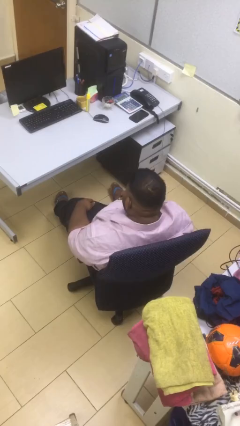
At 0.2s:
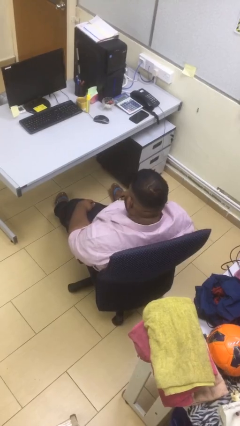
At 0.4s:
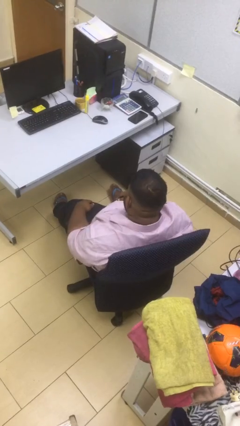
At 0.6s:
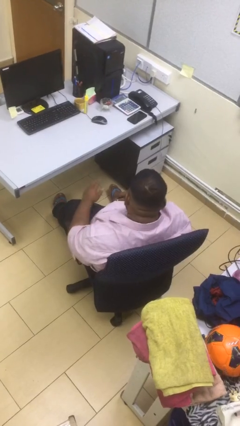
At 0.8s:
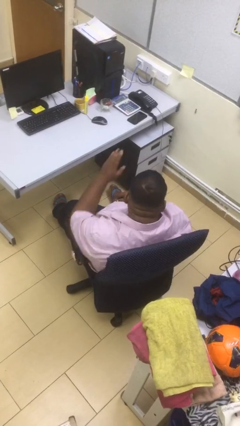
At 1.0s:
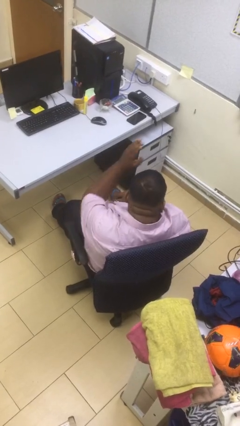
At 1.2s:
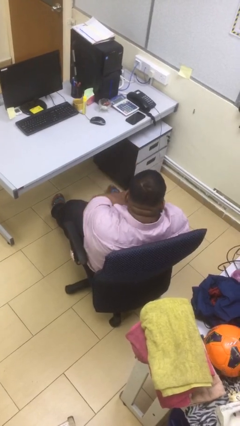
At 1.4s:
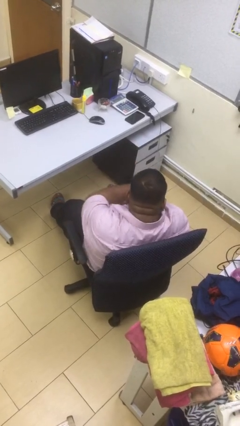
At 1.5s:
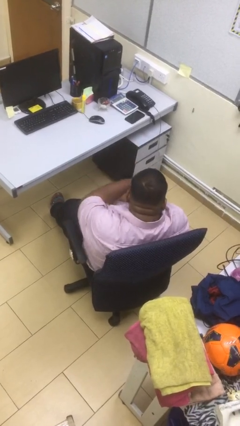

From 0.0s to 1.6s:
person swats bug

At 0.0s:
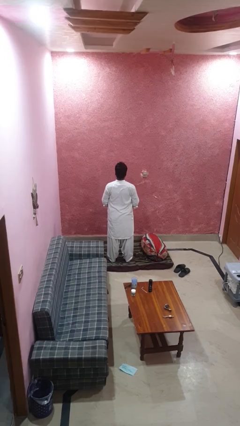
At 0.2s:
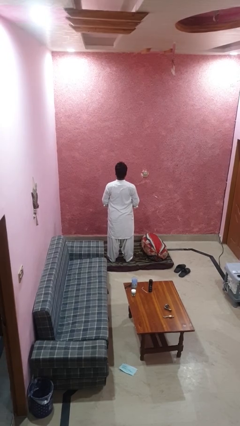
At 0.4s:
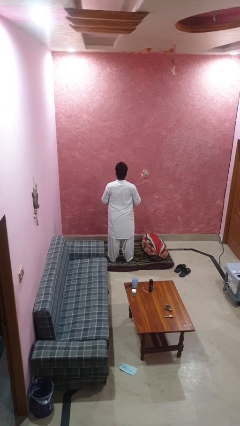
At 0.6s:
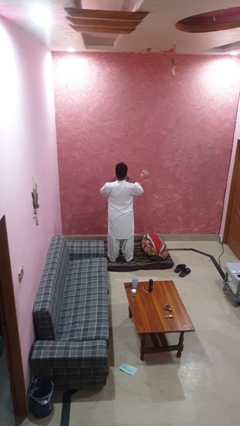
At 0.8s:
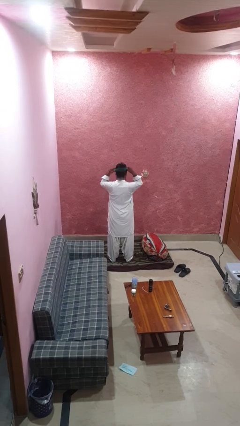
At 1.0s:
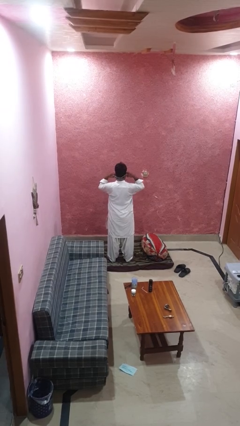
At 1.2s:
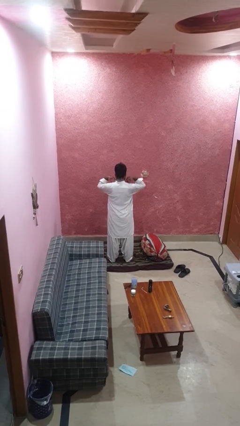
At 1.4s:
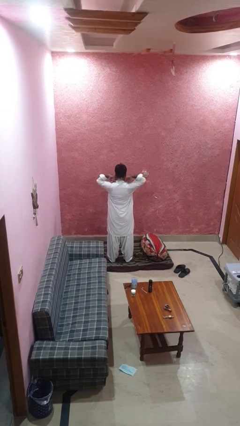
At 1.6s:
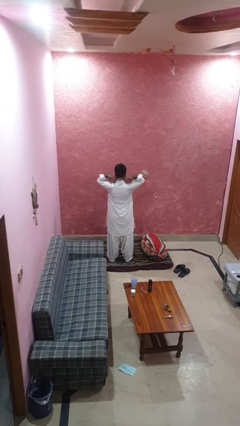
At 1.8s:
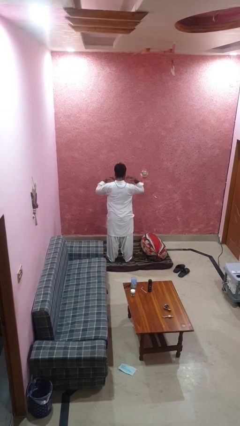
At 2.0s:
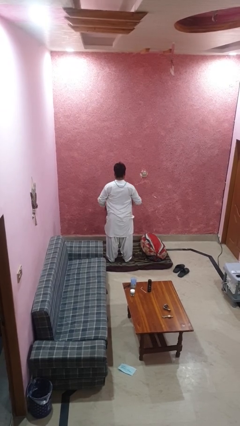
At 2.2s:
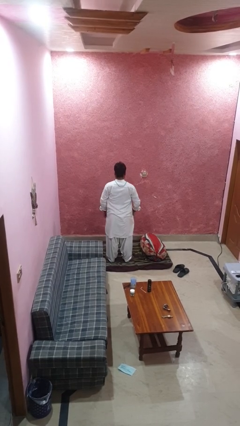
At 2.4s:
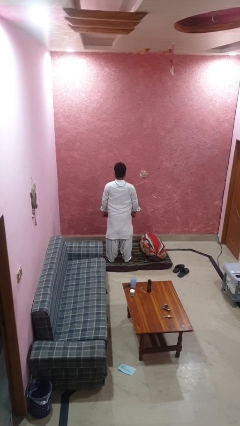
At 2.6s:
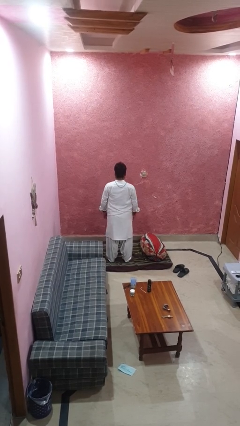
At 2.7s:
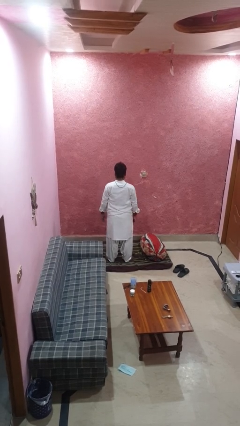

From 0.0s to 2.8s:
person puts on necklace

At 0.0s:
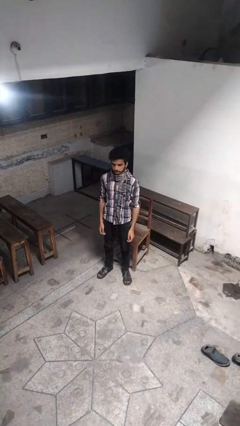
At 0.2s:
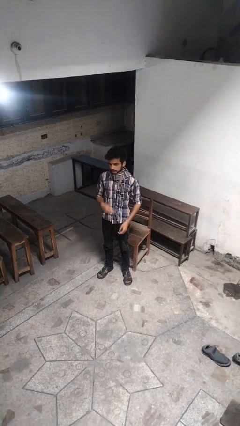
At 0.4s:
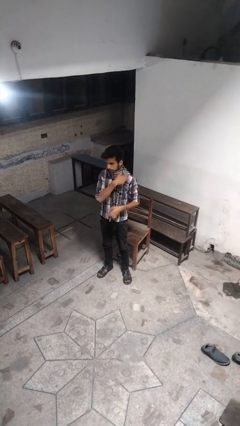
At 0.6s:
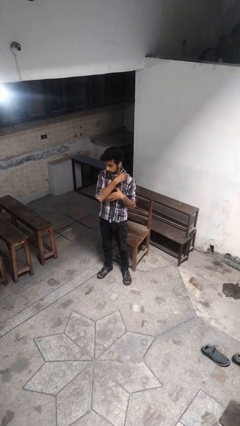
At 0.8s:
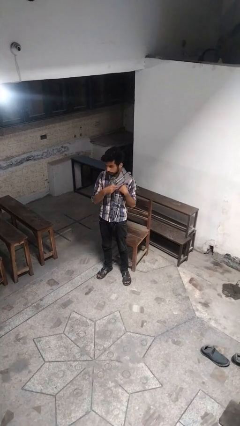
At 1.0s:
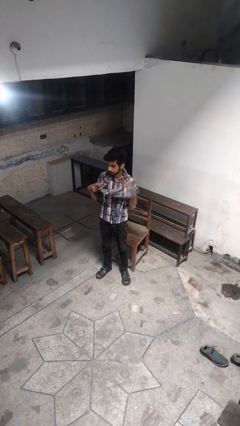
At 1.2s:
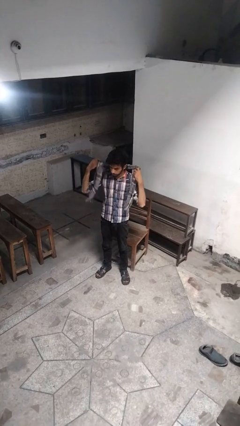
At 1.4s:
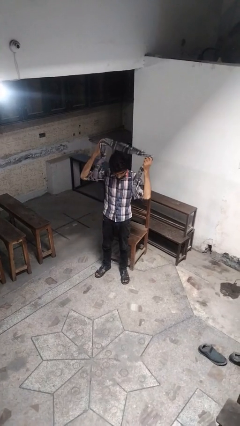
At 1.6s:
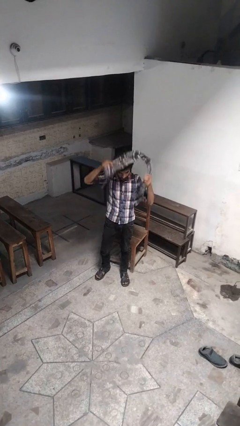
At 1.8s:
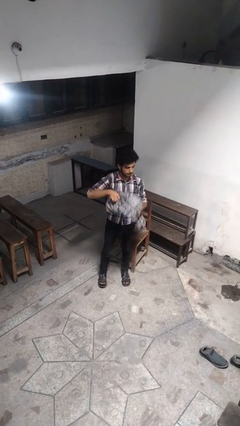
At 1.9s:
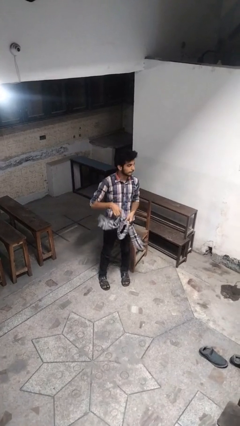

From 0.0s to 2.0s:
person takes off scarf

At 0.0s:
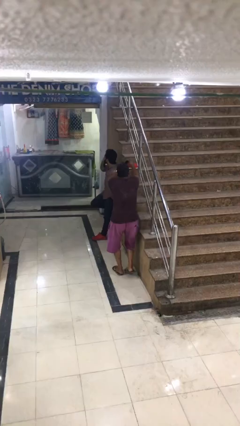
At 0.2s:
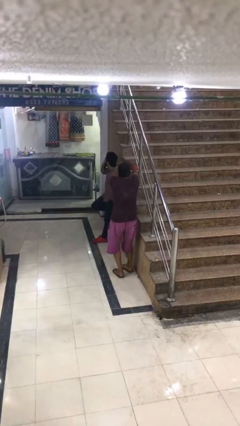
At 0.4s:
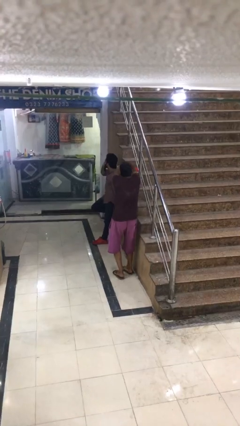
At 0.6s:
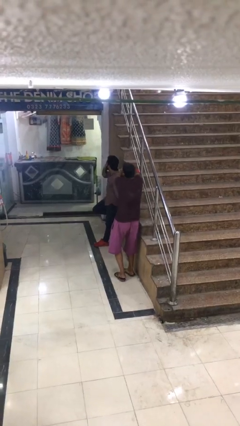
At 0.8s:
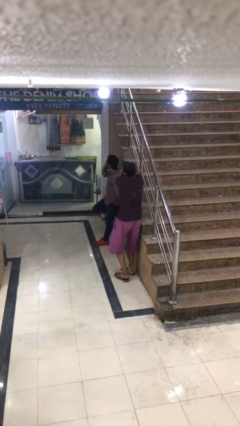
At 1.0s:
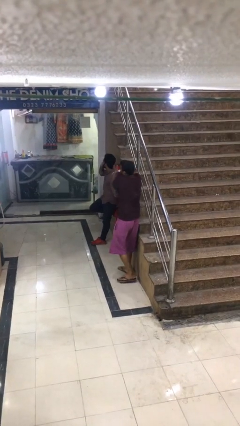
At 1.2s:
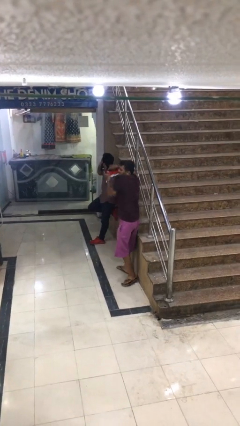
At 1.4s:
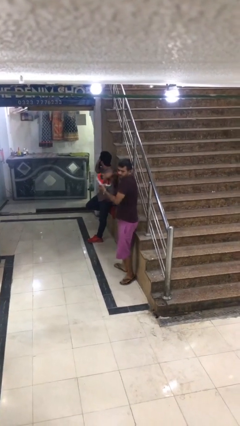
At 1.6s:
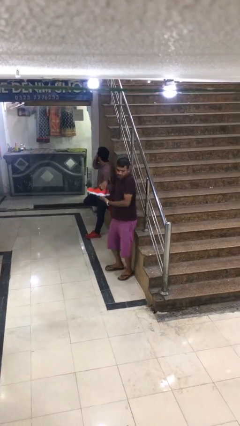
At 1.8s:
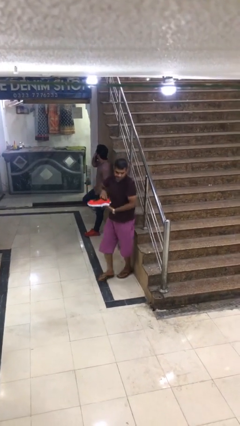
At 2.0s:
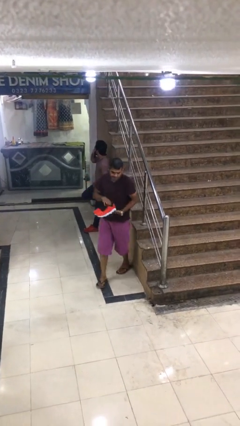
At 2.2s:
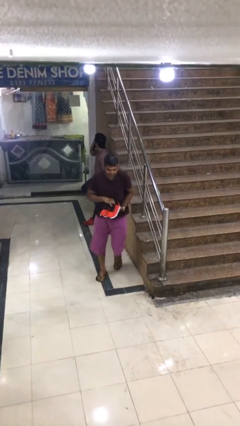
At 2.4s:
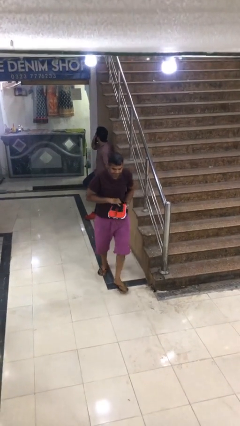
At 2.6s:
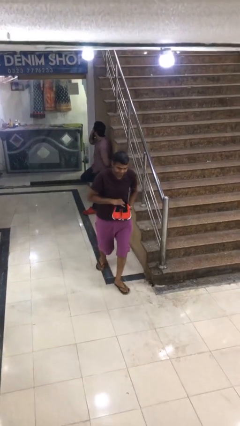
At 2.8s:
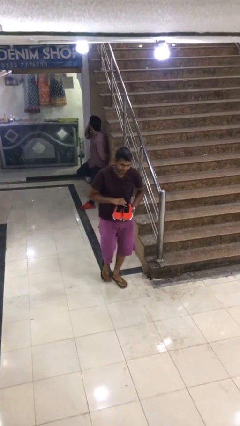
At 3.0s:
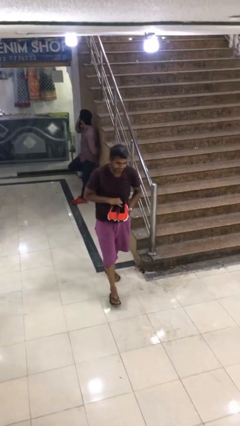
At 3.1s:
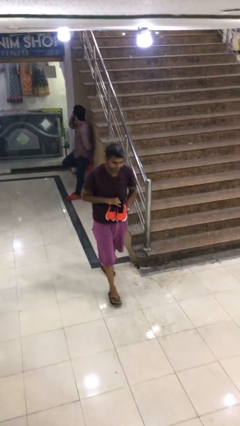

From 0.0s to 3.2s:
person steals object from person

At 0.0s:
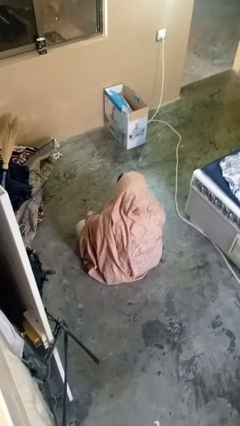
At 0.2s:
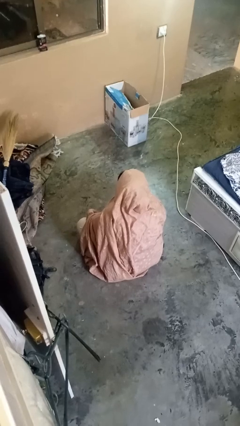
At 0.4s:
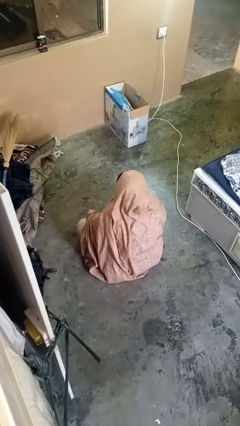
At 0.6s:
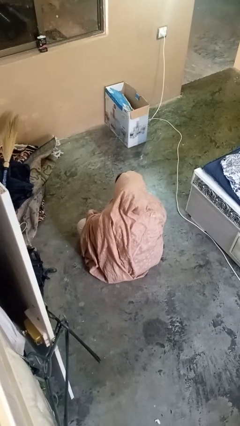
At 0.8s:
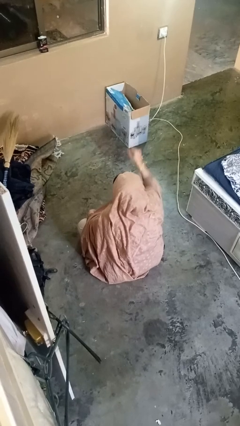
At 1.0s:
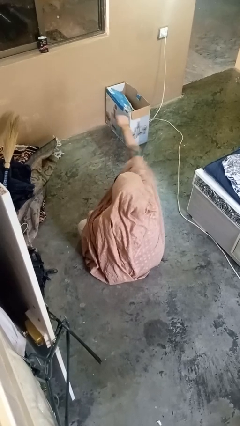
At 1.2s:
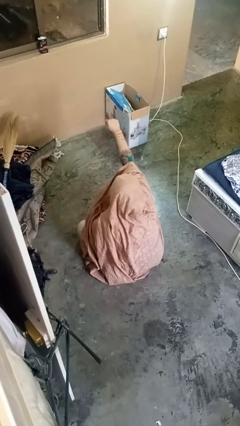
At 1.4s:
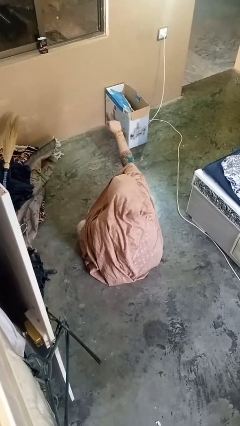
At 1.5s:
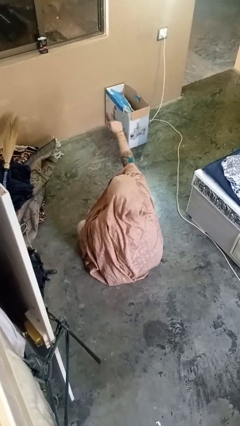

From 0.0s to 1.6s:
person punches

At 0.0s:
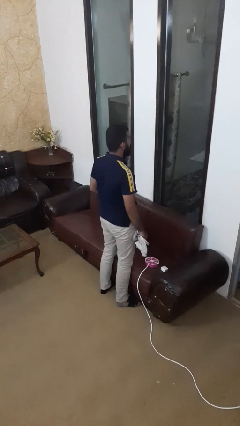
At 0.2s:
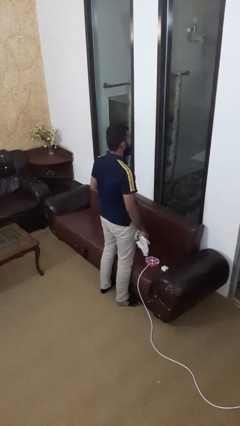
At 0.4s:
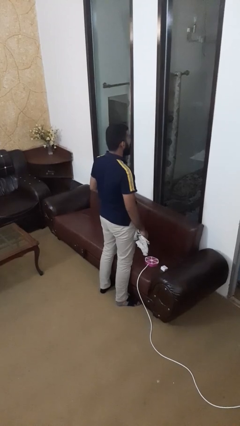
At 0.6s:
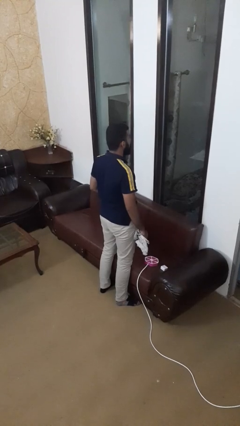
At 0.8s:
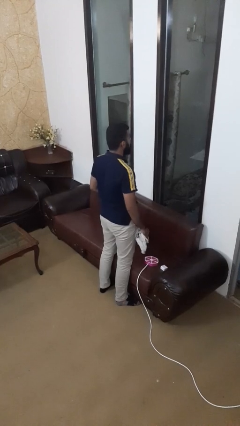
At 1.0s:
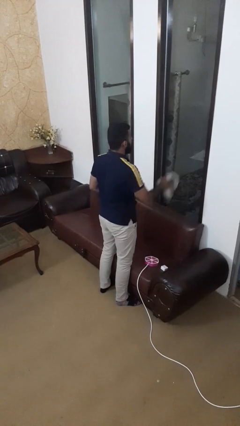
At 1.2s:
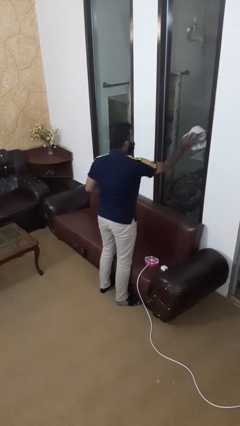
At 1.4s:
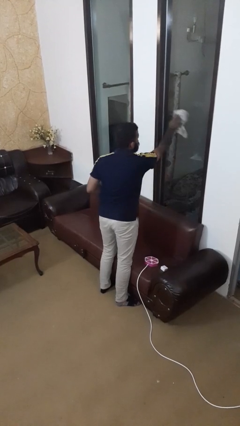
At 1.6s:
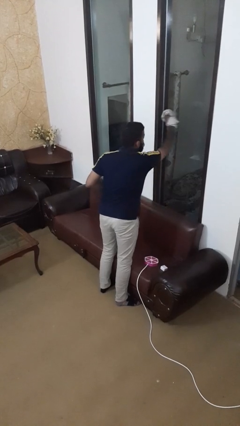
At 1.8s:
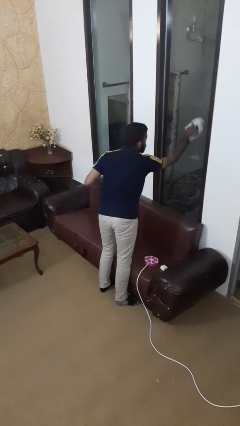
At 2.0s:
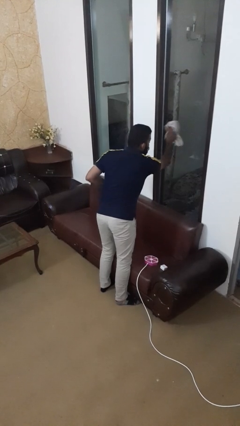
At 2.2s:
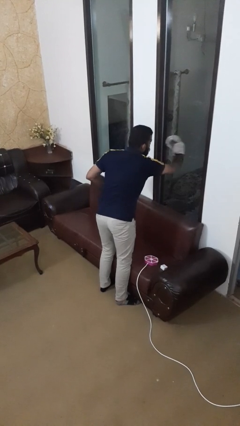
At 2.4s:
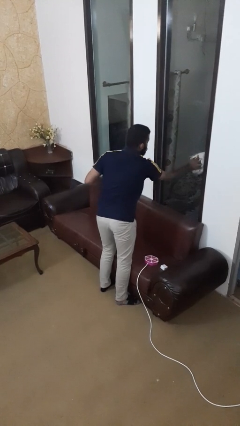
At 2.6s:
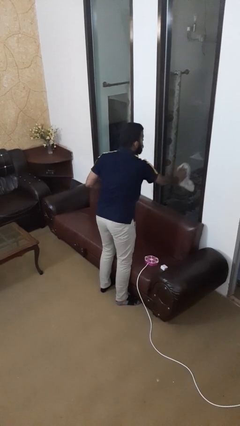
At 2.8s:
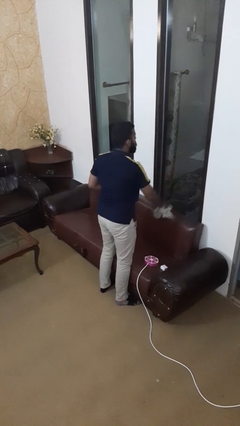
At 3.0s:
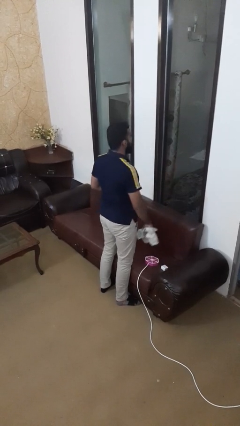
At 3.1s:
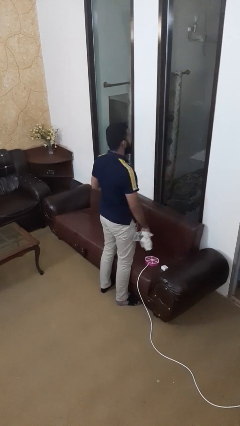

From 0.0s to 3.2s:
person washes window

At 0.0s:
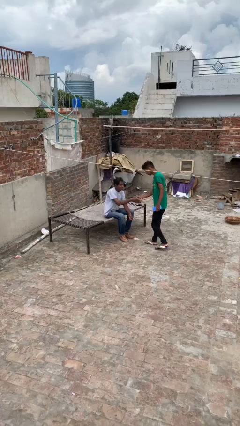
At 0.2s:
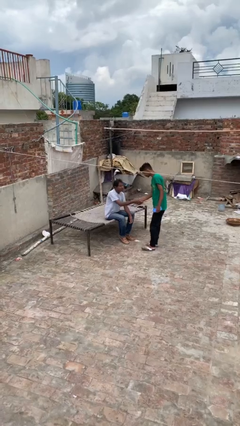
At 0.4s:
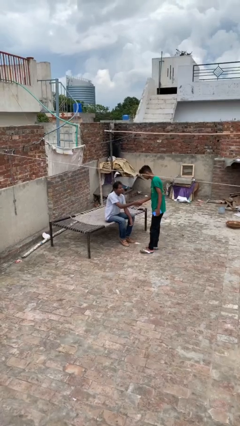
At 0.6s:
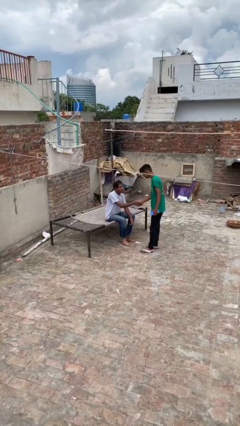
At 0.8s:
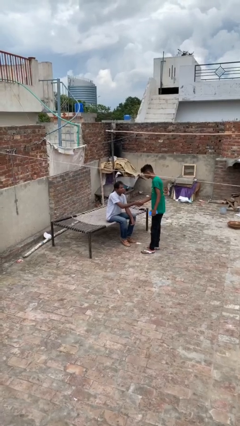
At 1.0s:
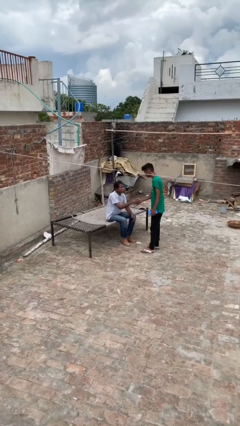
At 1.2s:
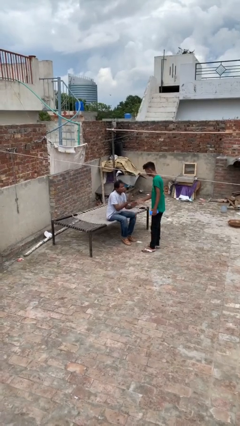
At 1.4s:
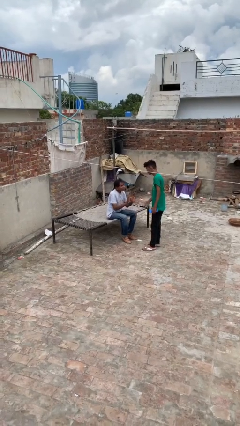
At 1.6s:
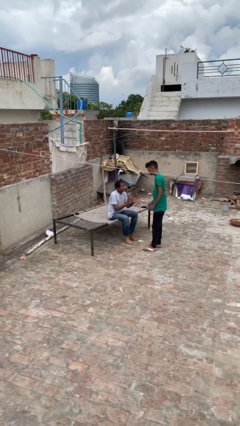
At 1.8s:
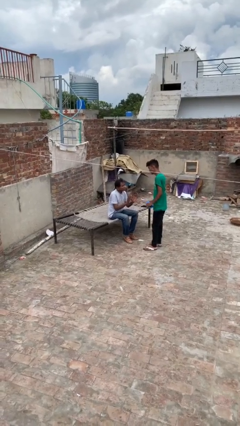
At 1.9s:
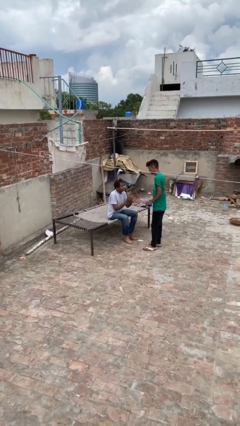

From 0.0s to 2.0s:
person shakes hand

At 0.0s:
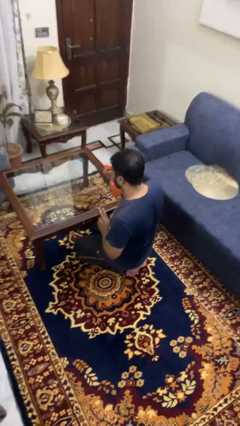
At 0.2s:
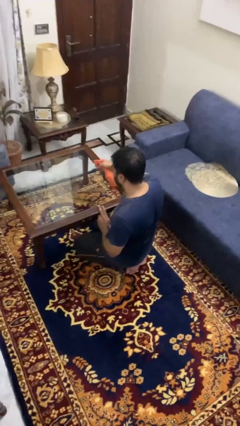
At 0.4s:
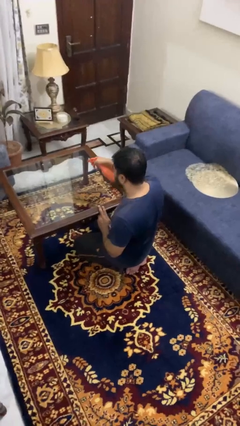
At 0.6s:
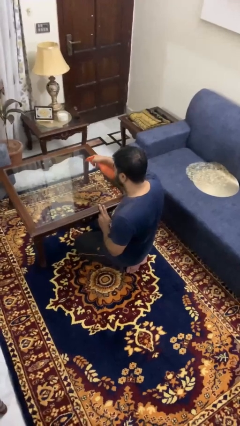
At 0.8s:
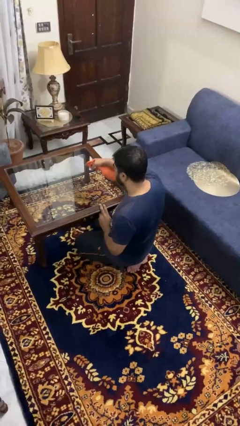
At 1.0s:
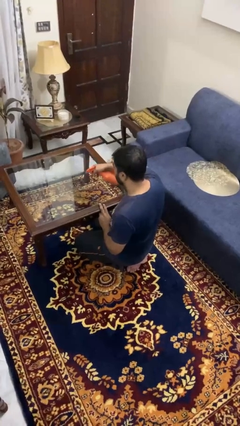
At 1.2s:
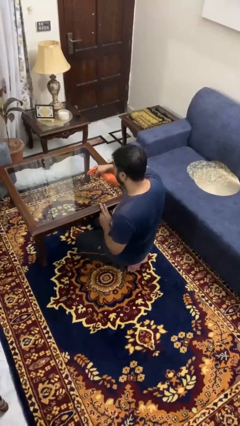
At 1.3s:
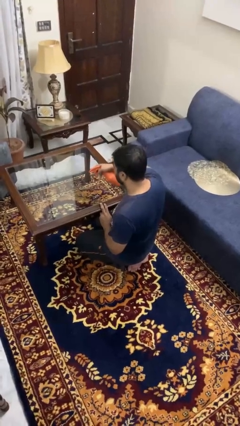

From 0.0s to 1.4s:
person sprays from bottle
